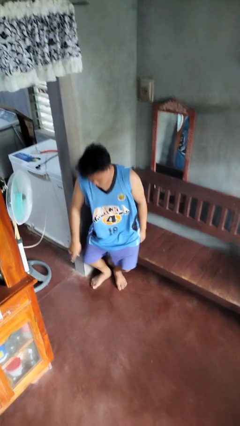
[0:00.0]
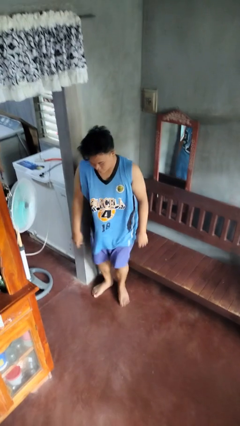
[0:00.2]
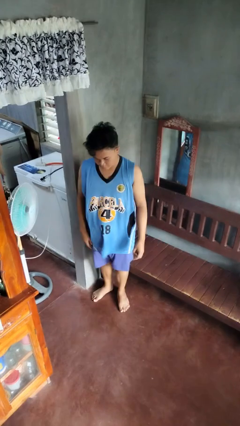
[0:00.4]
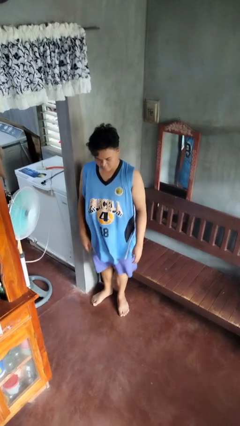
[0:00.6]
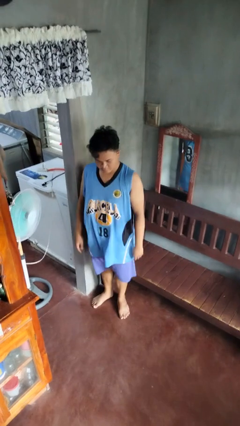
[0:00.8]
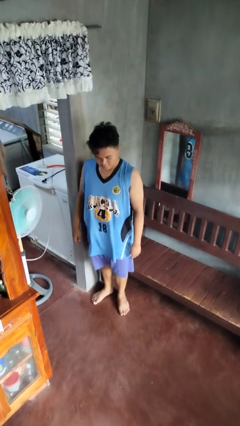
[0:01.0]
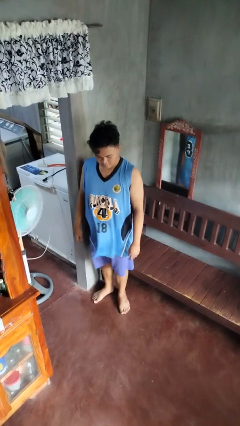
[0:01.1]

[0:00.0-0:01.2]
person stands up

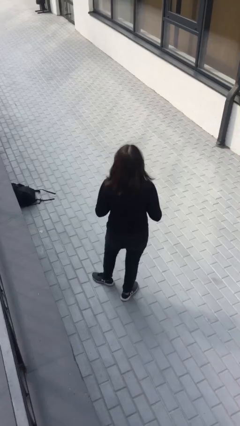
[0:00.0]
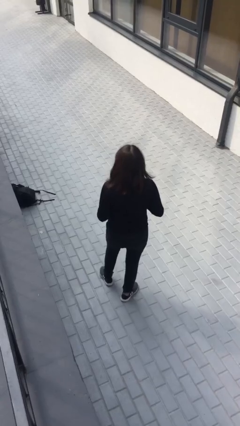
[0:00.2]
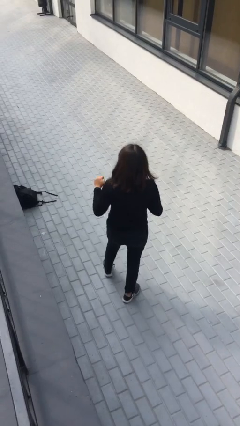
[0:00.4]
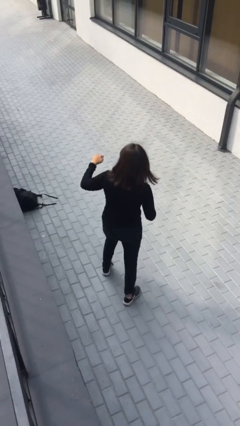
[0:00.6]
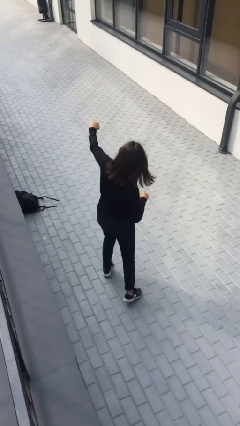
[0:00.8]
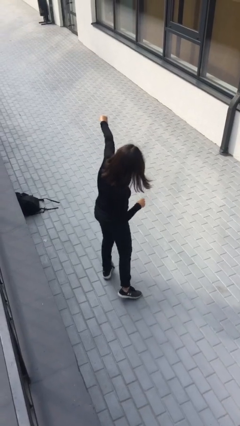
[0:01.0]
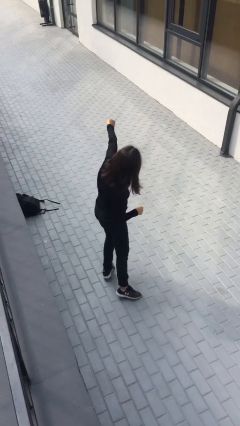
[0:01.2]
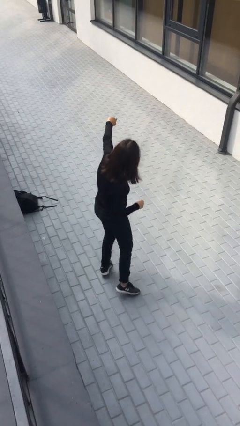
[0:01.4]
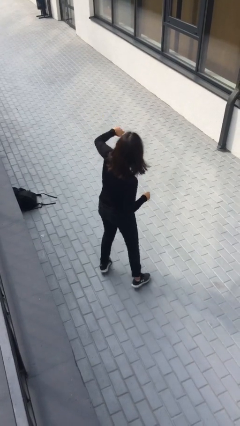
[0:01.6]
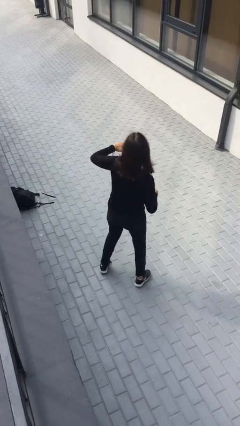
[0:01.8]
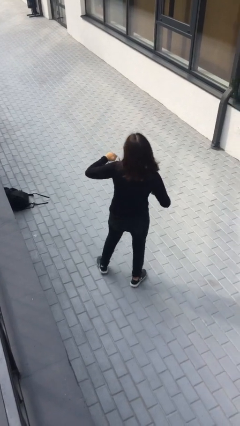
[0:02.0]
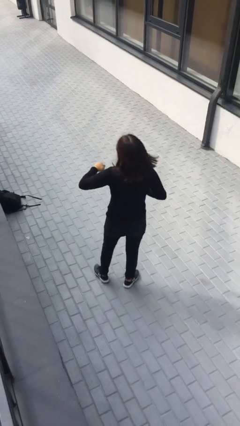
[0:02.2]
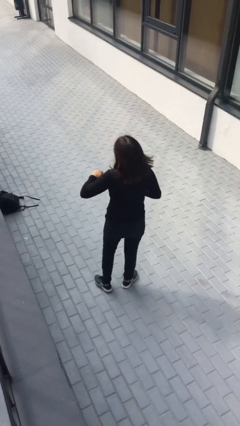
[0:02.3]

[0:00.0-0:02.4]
person punches

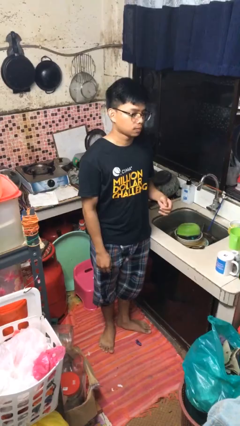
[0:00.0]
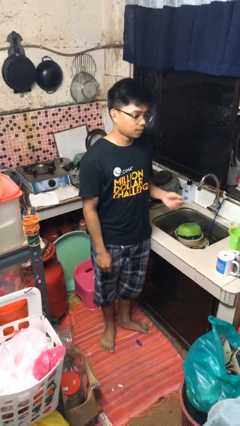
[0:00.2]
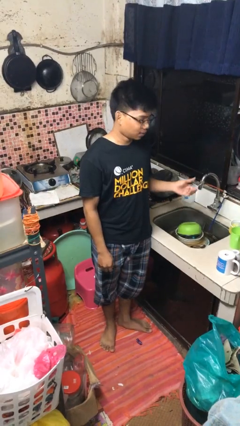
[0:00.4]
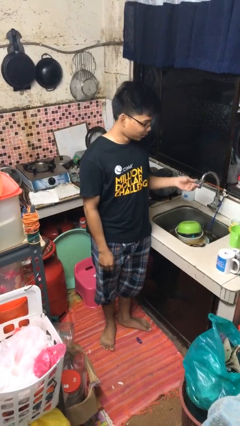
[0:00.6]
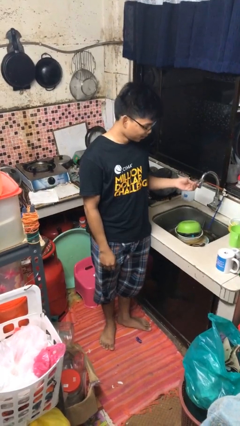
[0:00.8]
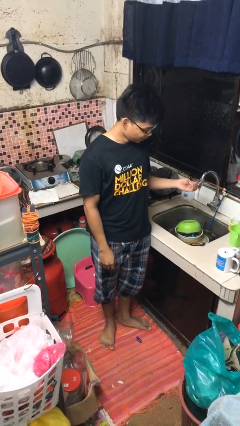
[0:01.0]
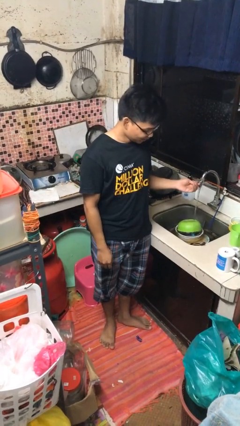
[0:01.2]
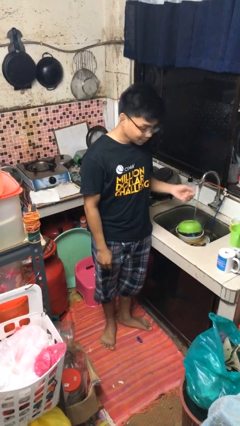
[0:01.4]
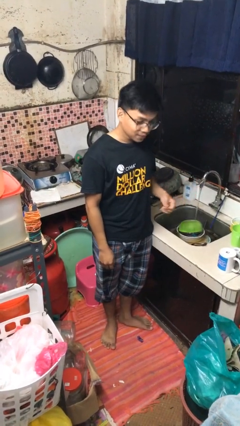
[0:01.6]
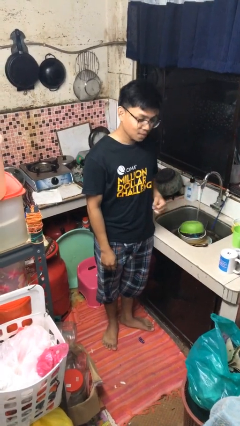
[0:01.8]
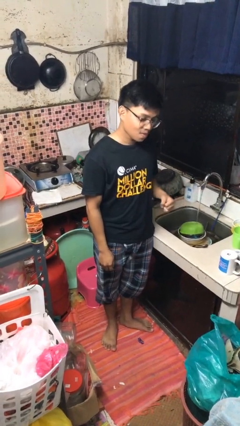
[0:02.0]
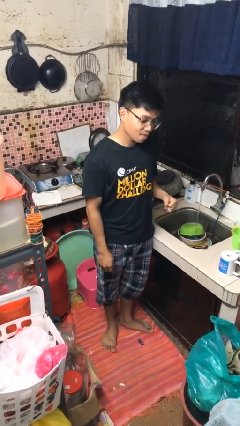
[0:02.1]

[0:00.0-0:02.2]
person turns on faucet

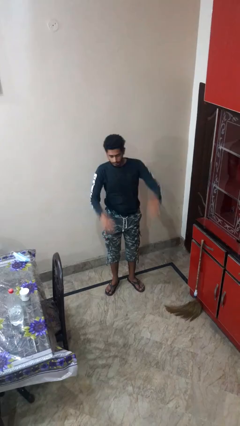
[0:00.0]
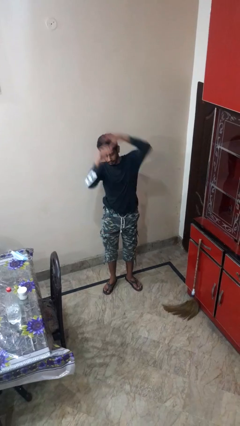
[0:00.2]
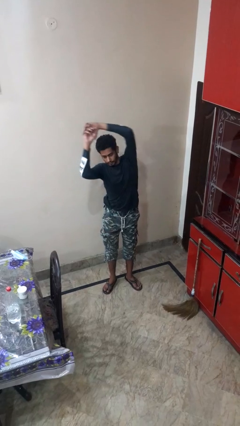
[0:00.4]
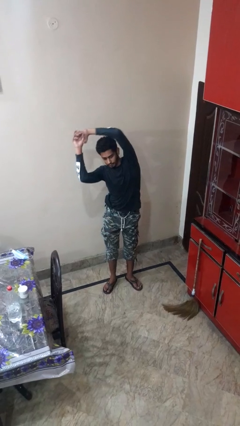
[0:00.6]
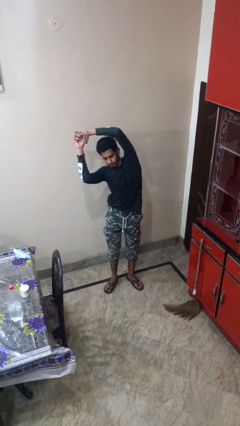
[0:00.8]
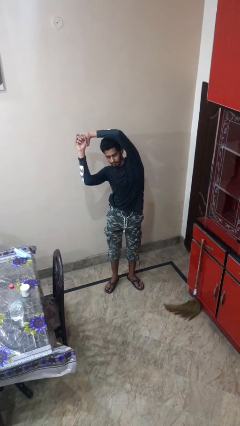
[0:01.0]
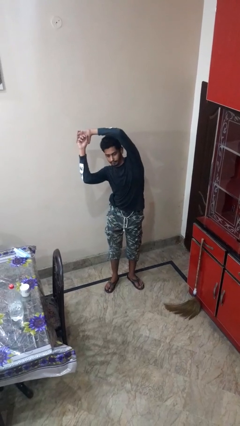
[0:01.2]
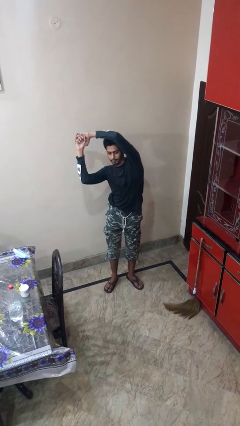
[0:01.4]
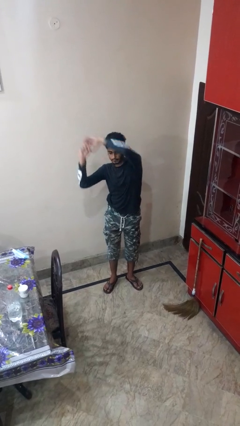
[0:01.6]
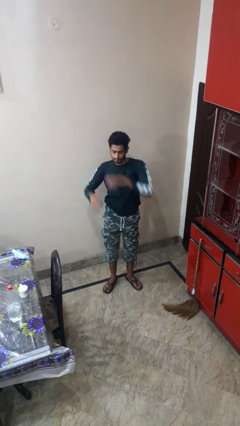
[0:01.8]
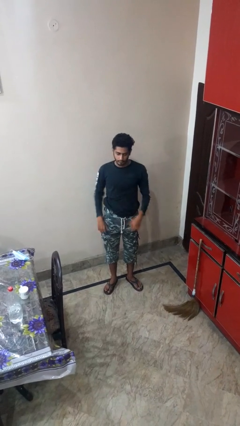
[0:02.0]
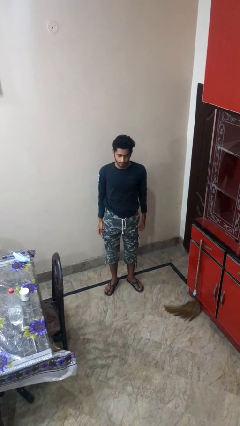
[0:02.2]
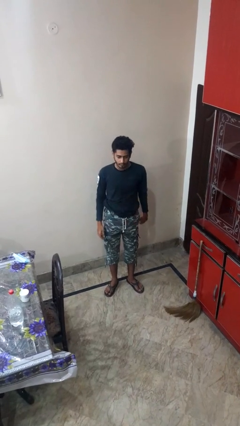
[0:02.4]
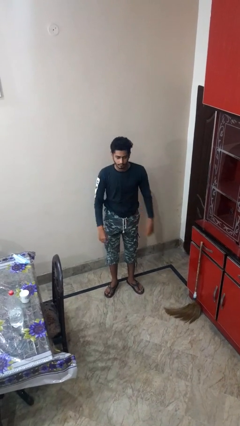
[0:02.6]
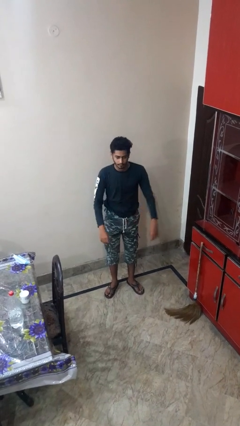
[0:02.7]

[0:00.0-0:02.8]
person stretches arms to side

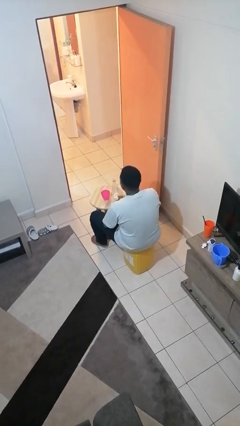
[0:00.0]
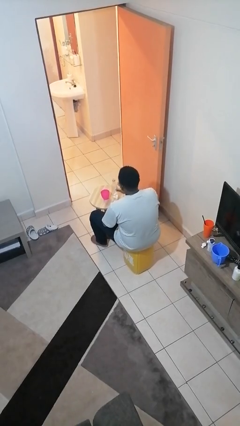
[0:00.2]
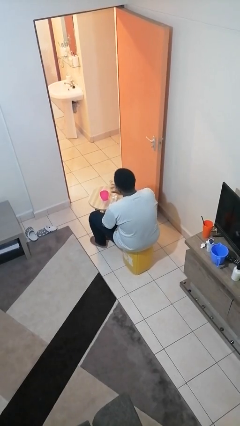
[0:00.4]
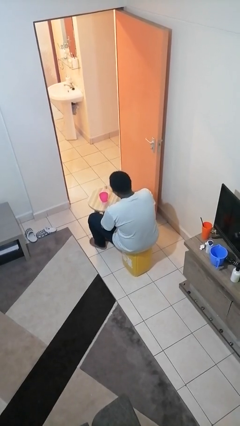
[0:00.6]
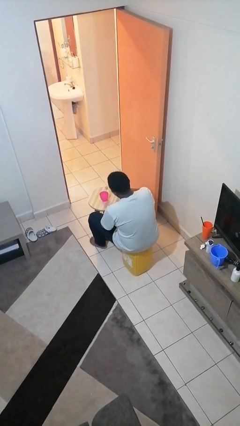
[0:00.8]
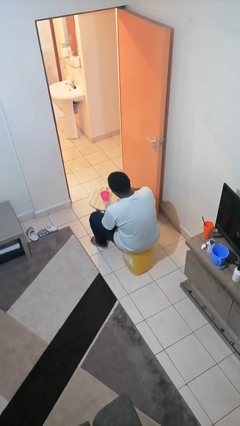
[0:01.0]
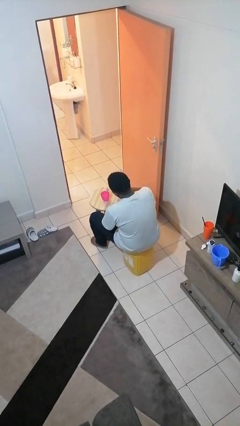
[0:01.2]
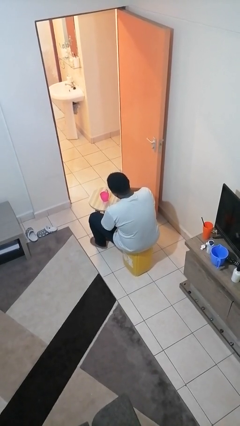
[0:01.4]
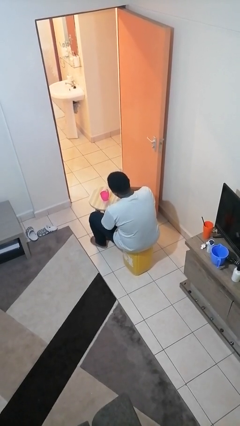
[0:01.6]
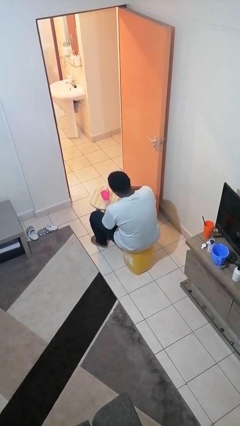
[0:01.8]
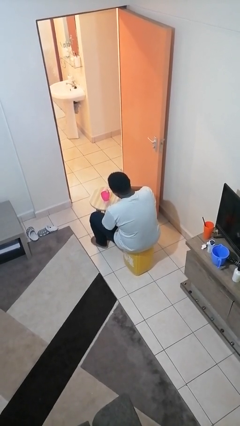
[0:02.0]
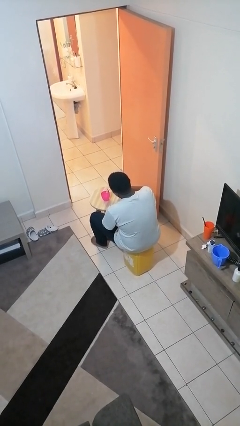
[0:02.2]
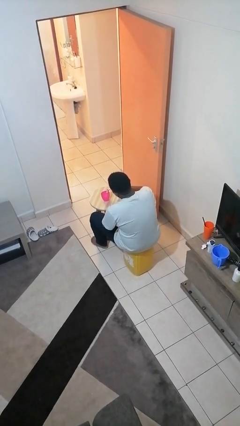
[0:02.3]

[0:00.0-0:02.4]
person pours liquid into cup

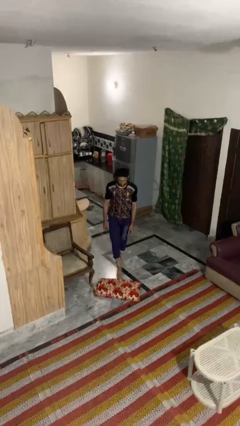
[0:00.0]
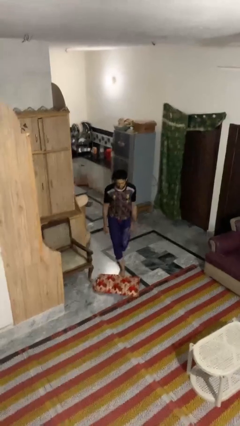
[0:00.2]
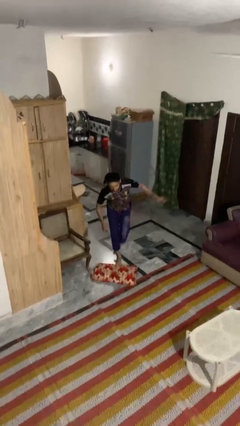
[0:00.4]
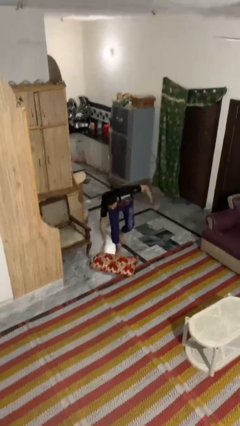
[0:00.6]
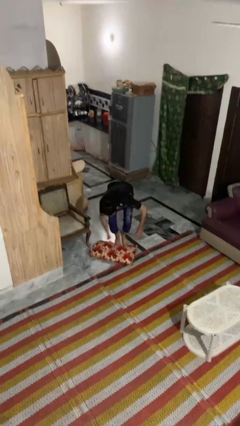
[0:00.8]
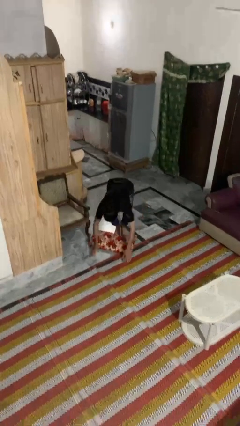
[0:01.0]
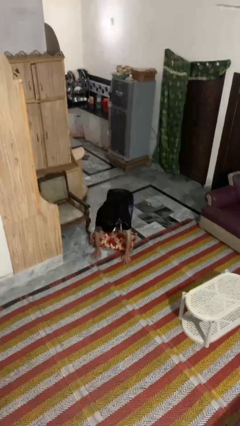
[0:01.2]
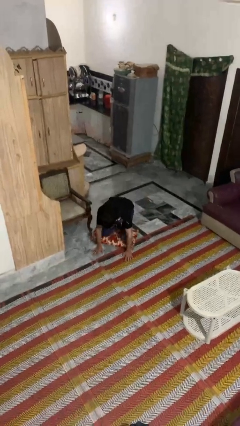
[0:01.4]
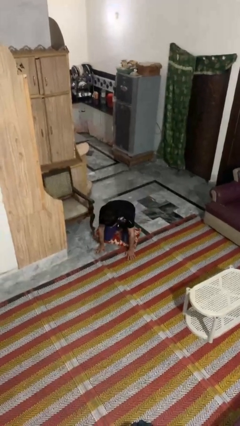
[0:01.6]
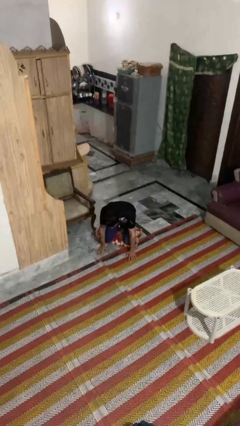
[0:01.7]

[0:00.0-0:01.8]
person trips on object on floor

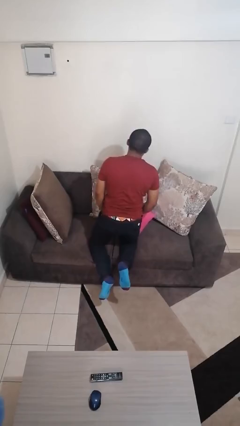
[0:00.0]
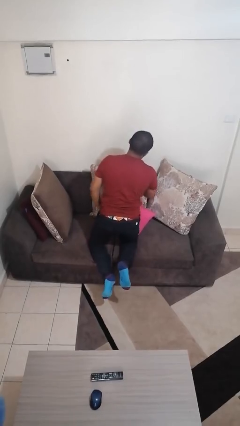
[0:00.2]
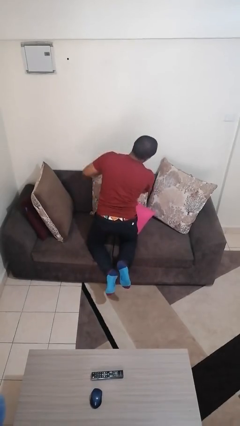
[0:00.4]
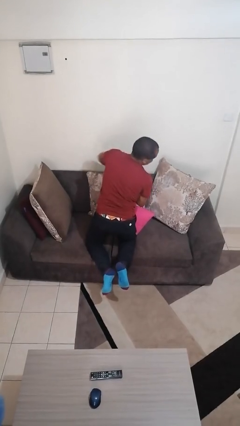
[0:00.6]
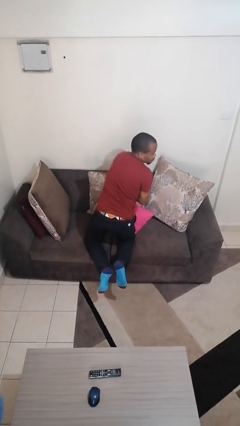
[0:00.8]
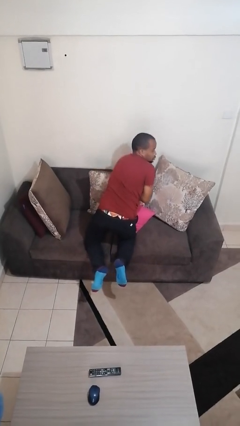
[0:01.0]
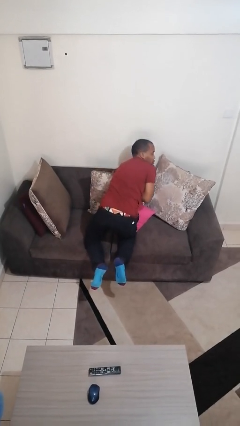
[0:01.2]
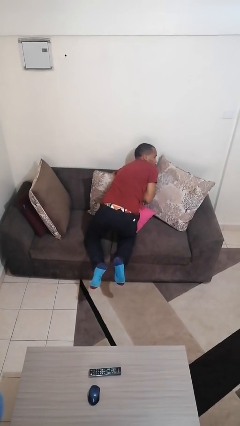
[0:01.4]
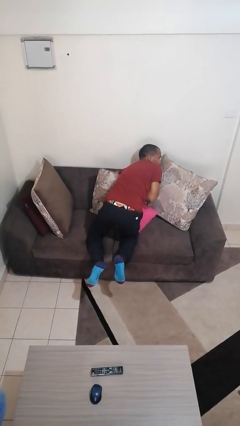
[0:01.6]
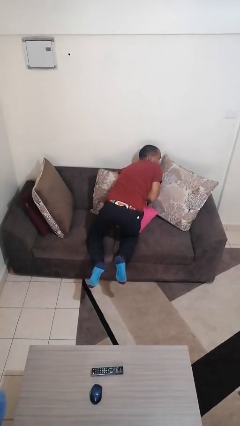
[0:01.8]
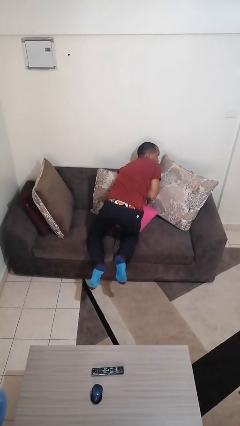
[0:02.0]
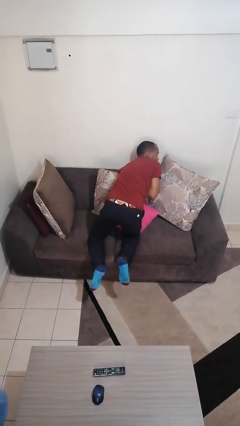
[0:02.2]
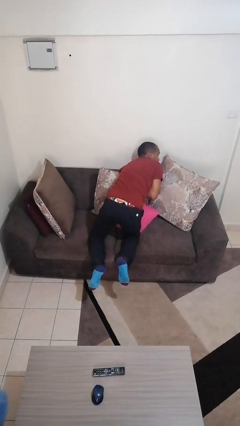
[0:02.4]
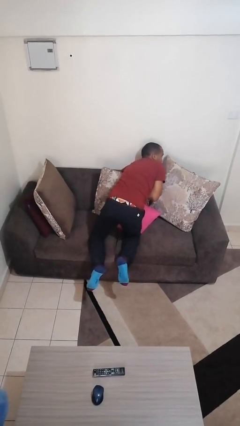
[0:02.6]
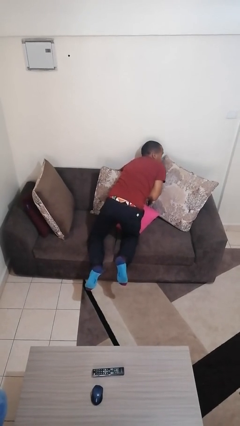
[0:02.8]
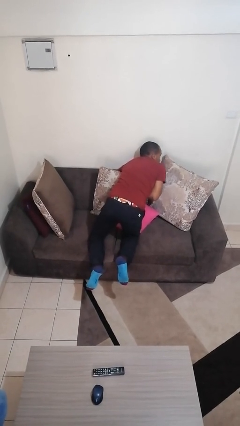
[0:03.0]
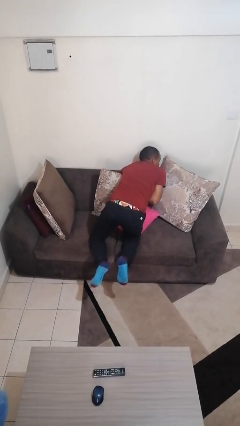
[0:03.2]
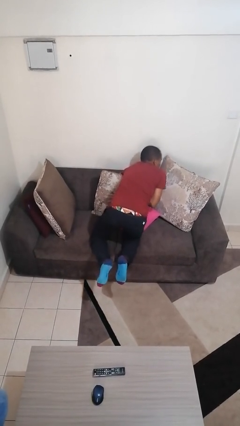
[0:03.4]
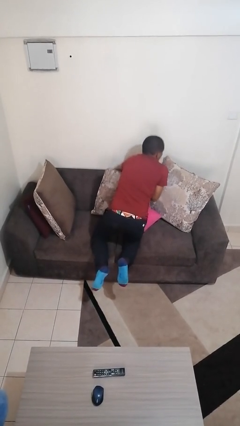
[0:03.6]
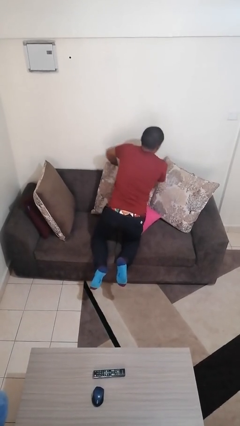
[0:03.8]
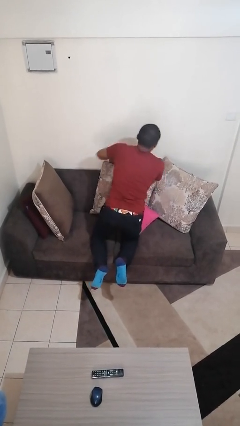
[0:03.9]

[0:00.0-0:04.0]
person searches in couch
